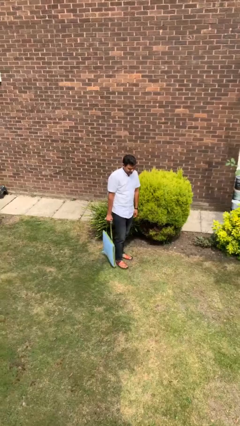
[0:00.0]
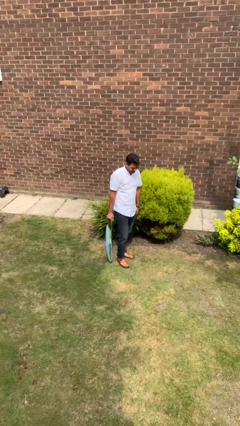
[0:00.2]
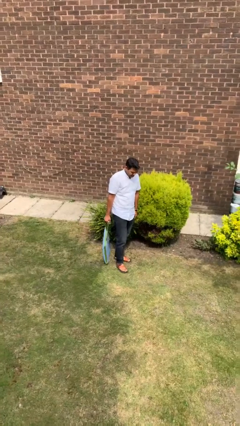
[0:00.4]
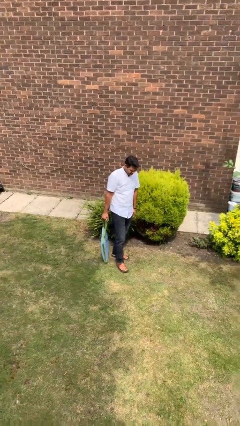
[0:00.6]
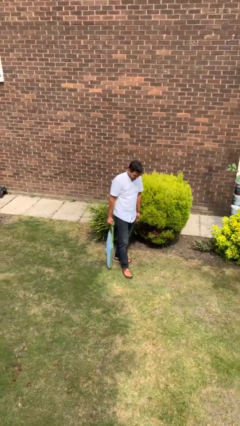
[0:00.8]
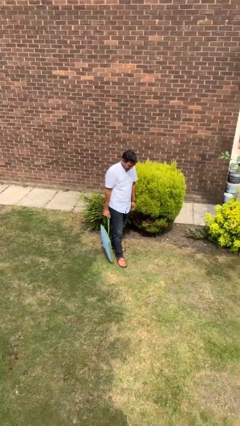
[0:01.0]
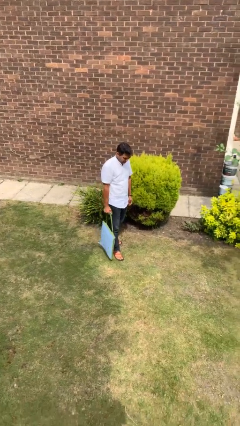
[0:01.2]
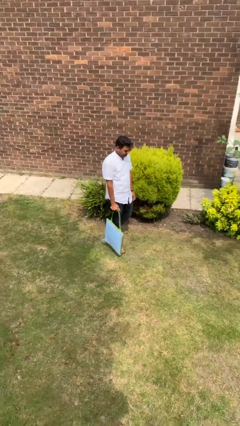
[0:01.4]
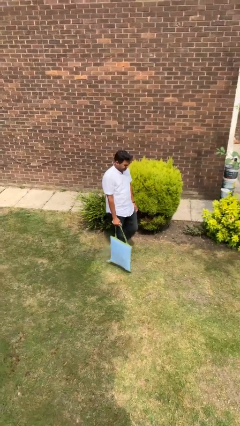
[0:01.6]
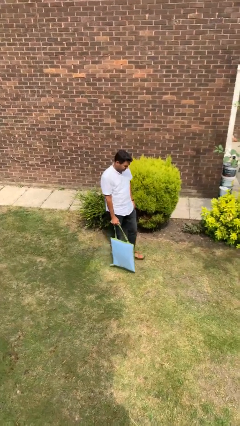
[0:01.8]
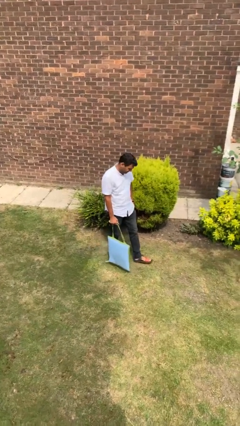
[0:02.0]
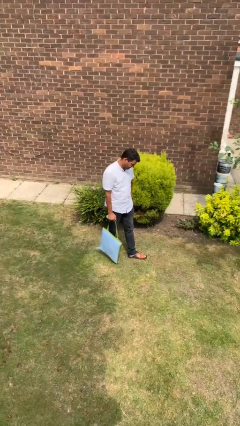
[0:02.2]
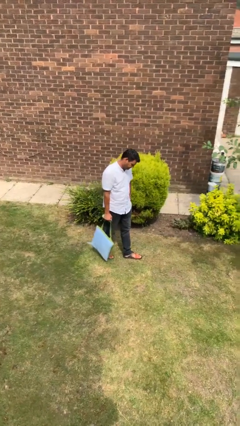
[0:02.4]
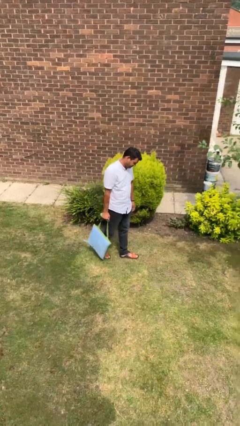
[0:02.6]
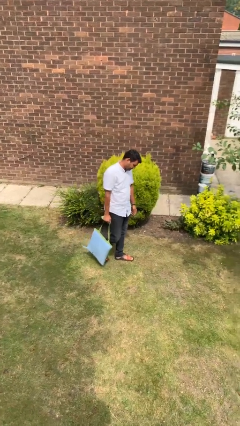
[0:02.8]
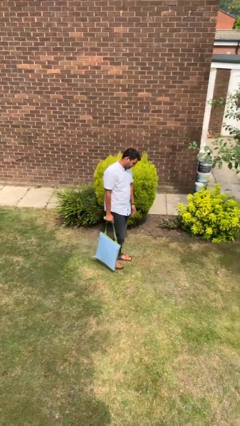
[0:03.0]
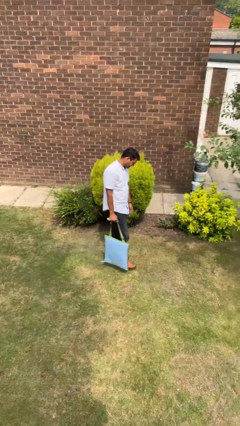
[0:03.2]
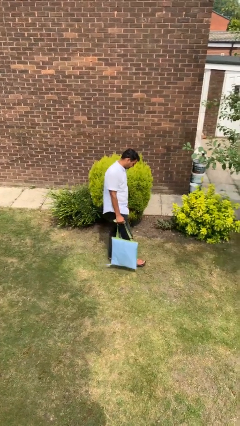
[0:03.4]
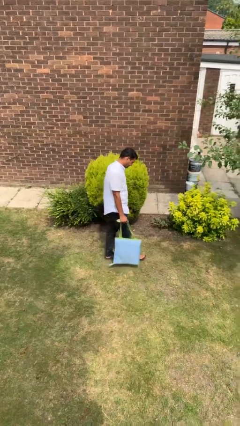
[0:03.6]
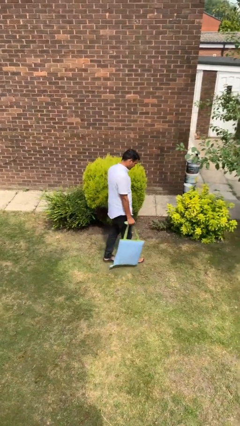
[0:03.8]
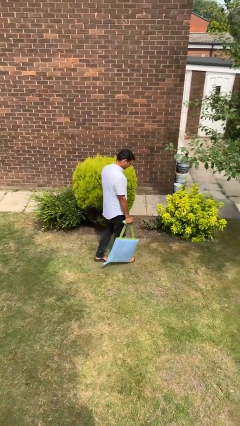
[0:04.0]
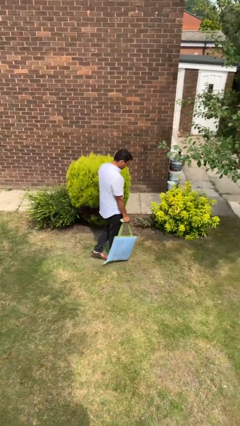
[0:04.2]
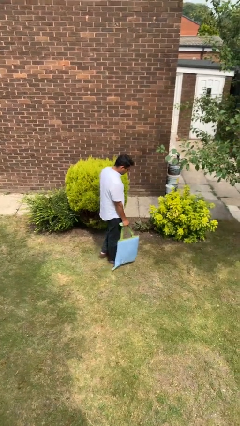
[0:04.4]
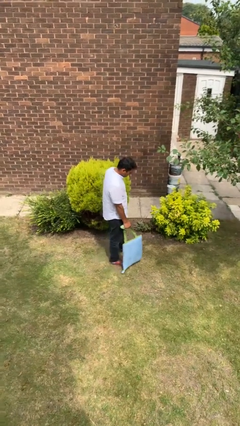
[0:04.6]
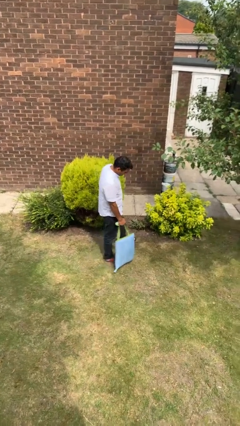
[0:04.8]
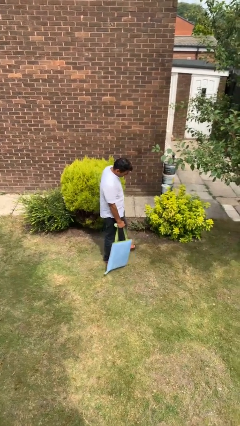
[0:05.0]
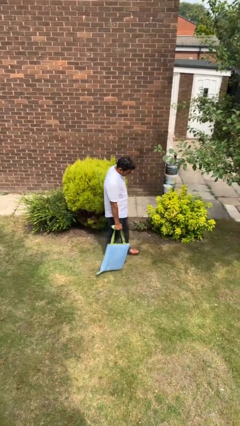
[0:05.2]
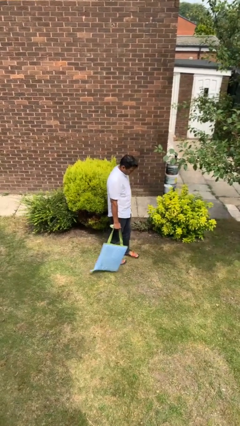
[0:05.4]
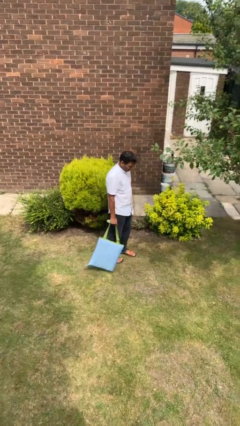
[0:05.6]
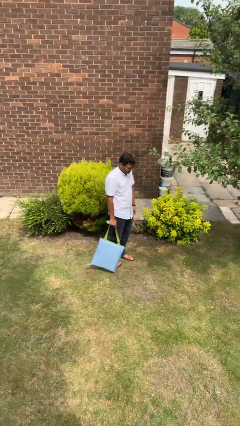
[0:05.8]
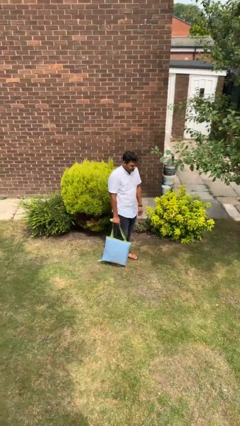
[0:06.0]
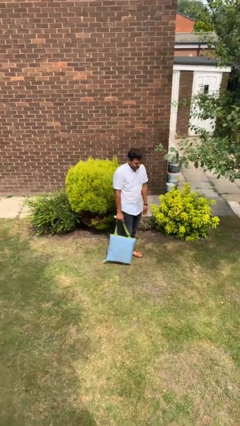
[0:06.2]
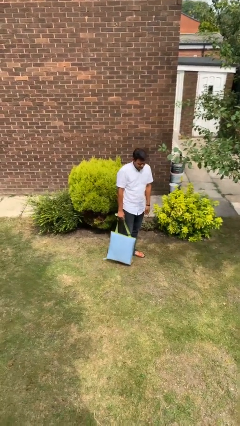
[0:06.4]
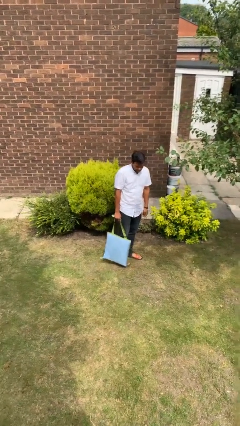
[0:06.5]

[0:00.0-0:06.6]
person carries groceries

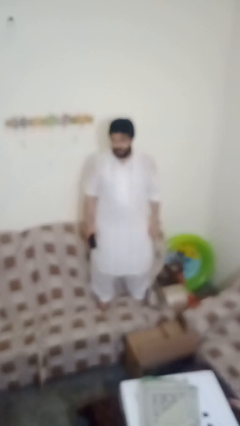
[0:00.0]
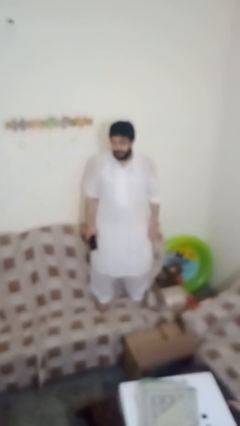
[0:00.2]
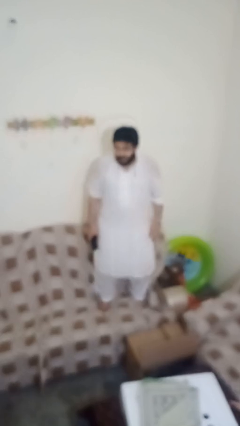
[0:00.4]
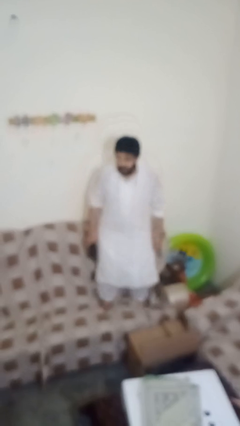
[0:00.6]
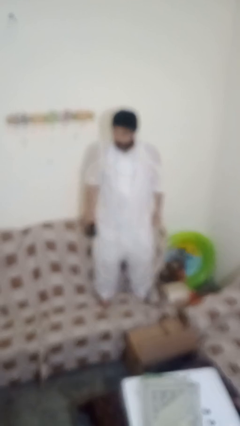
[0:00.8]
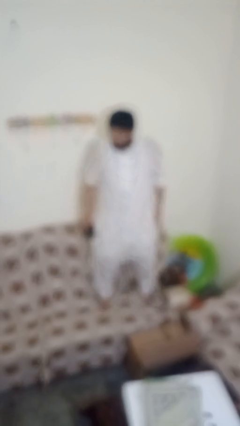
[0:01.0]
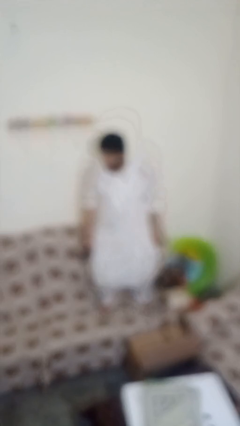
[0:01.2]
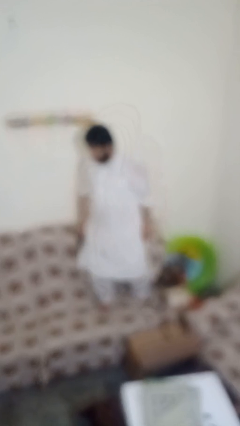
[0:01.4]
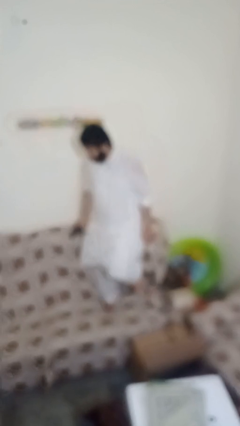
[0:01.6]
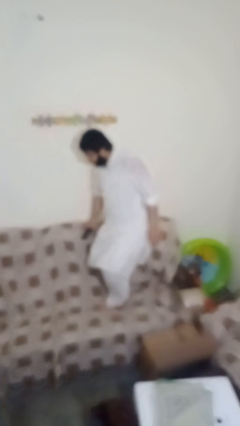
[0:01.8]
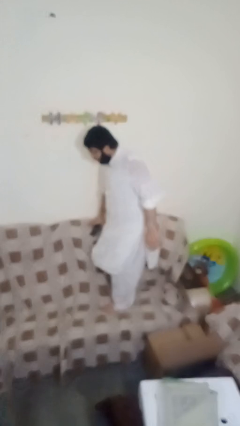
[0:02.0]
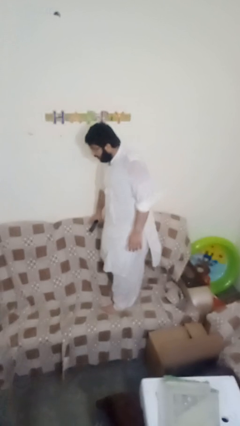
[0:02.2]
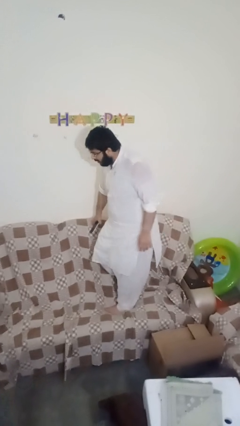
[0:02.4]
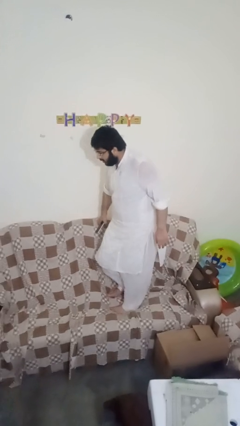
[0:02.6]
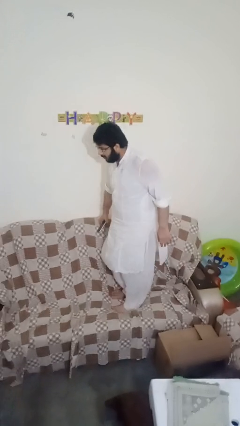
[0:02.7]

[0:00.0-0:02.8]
person jumps on couch

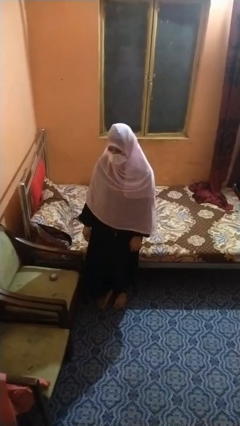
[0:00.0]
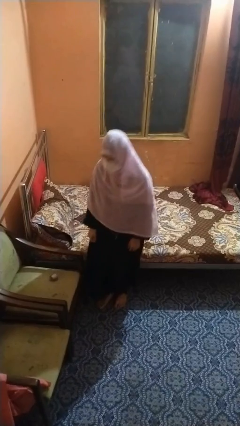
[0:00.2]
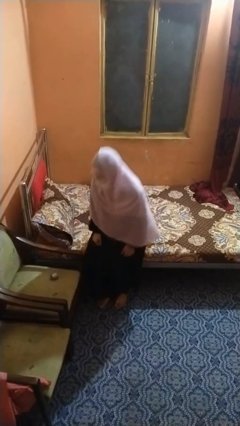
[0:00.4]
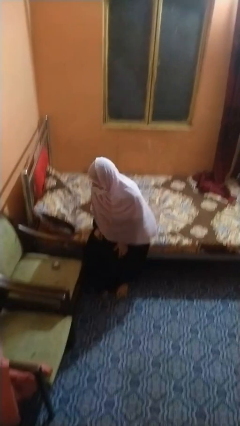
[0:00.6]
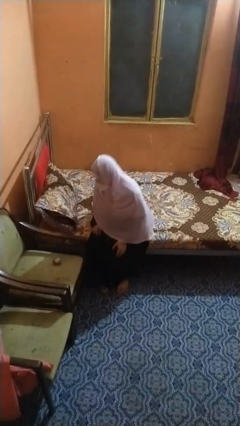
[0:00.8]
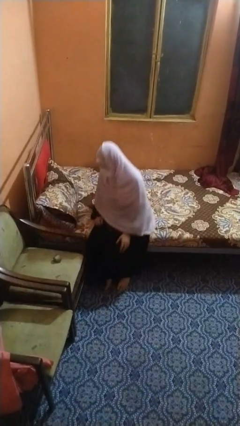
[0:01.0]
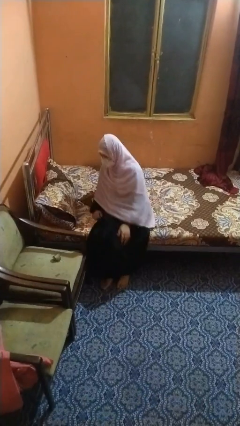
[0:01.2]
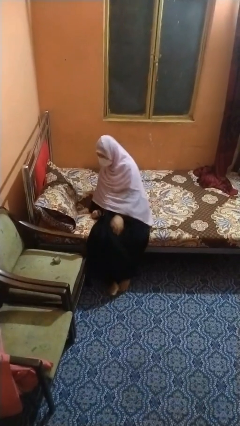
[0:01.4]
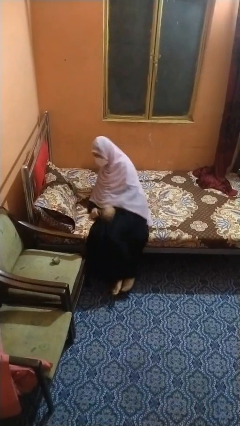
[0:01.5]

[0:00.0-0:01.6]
person lies down on bed

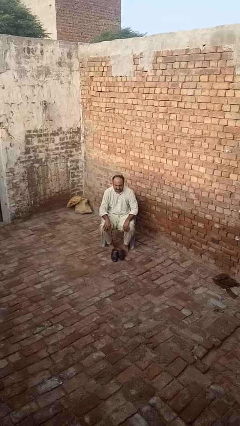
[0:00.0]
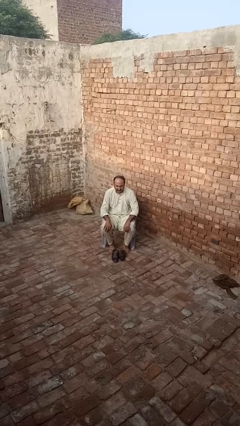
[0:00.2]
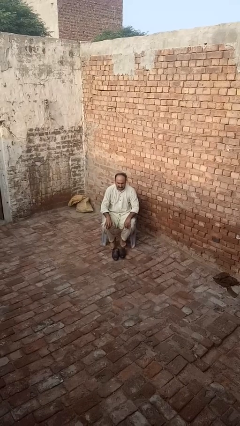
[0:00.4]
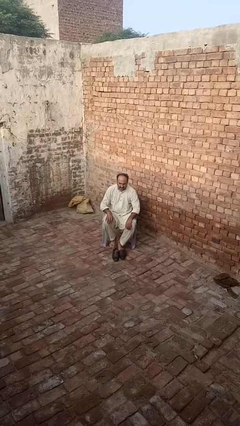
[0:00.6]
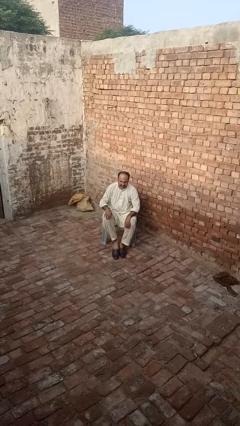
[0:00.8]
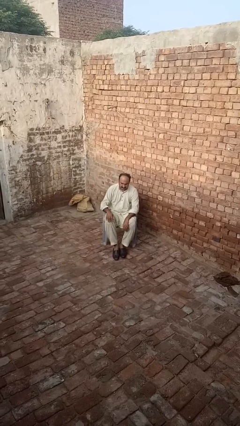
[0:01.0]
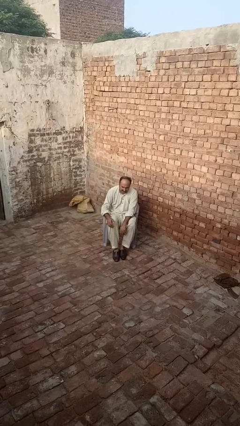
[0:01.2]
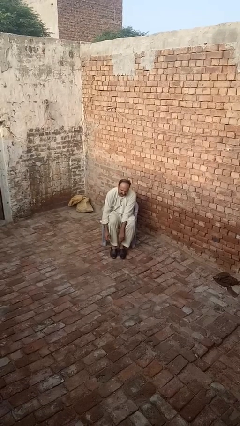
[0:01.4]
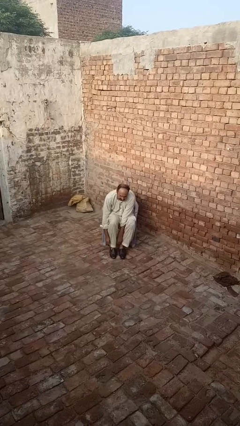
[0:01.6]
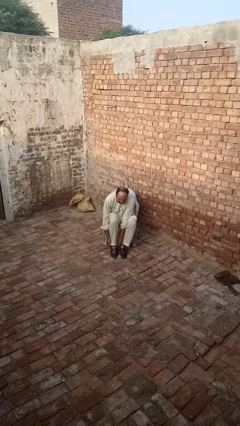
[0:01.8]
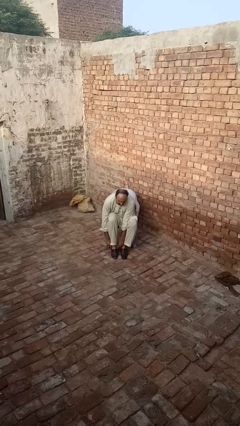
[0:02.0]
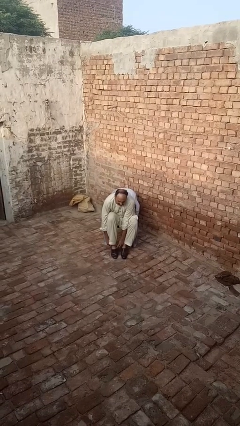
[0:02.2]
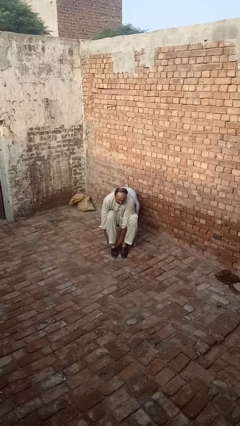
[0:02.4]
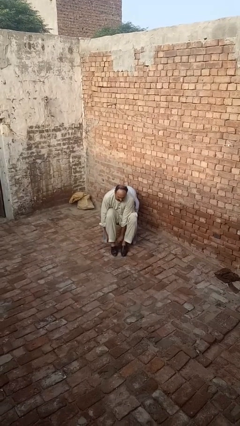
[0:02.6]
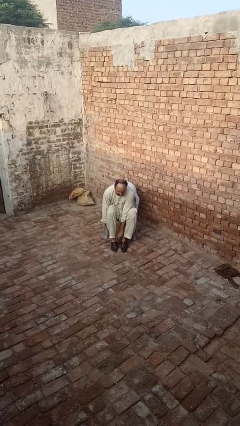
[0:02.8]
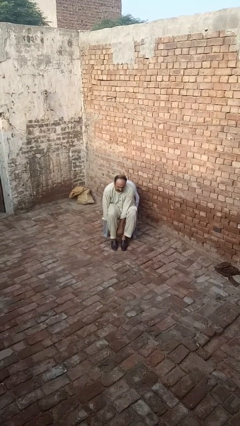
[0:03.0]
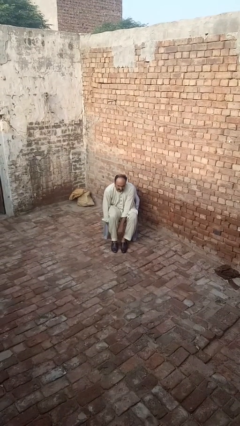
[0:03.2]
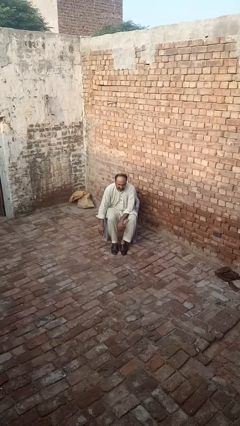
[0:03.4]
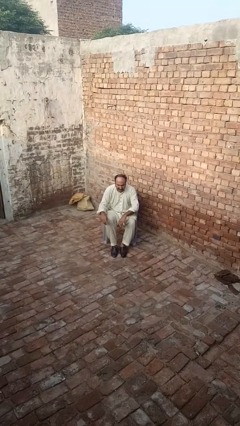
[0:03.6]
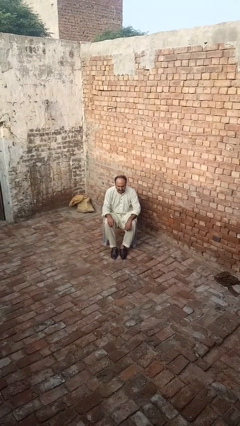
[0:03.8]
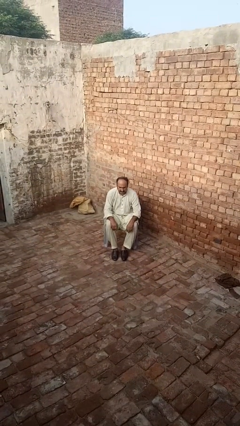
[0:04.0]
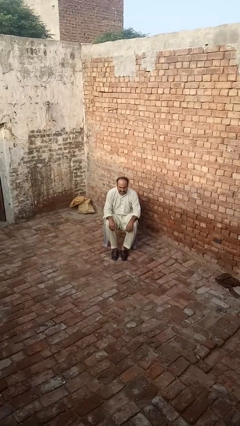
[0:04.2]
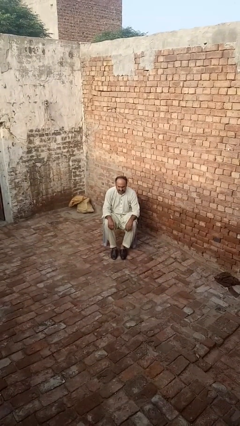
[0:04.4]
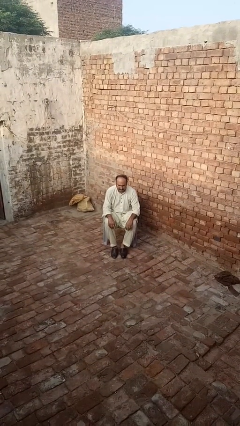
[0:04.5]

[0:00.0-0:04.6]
person puts on shoes

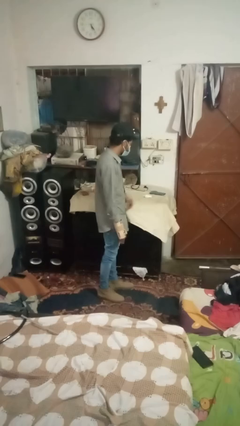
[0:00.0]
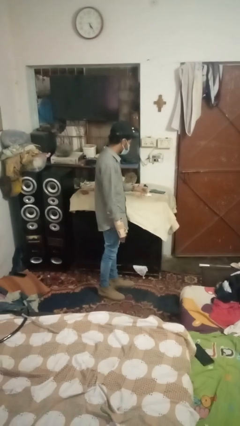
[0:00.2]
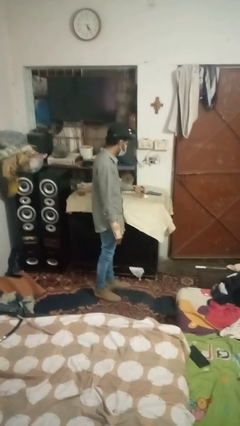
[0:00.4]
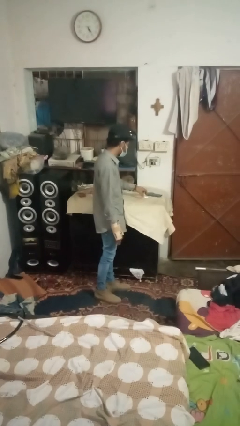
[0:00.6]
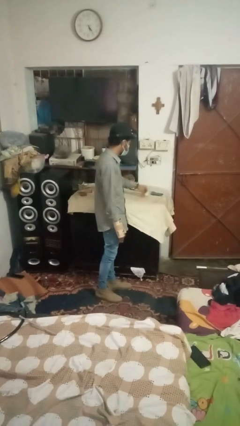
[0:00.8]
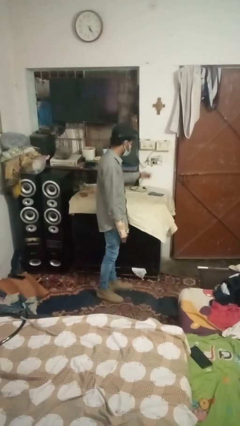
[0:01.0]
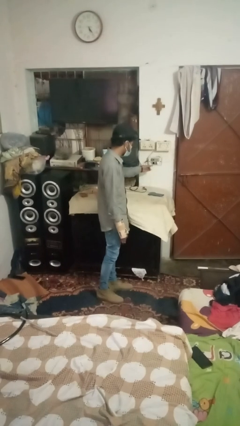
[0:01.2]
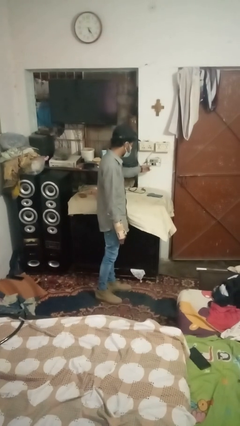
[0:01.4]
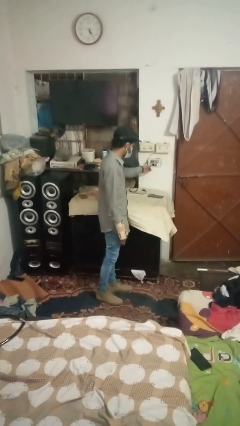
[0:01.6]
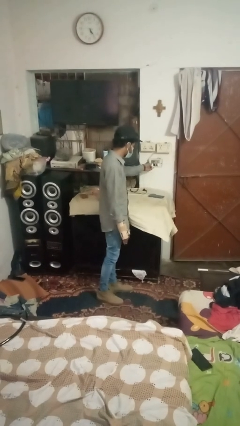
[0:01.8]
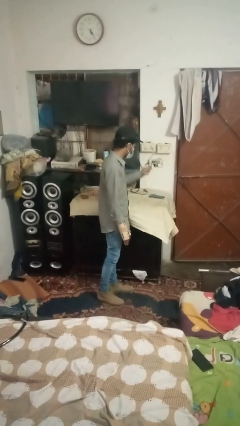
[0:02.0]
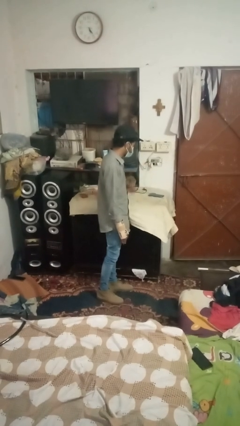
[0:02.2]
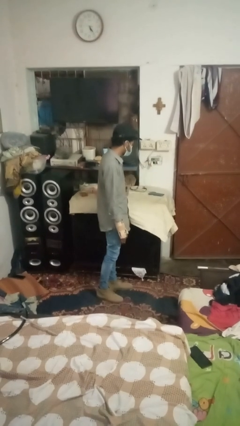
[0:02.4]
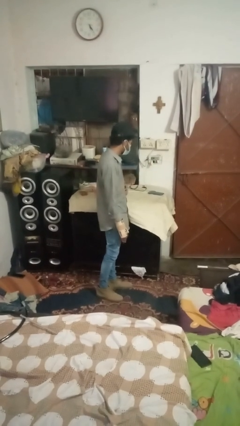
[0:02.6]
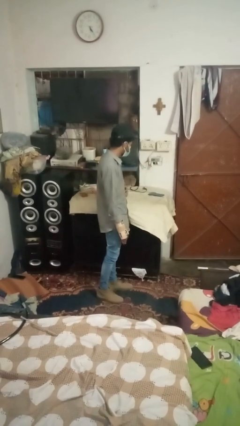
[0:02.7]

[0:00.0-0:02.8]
person plugs into electrical socket
